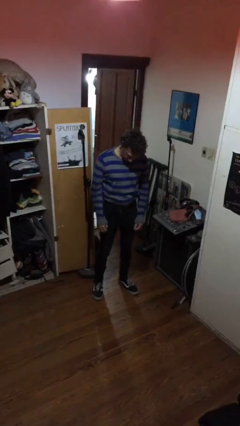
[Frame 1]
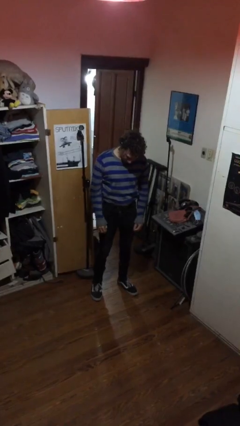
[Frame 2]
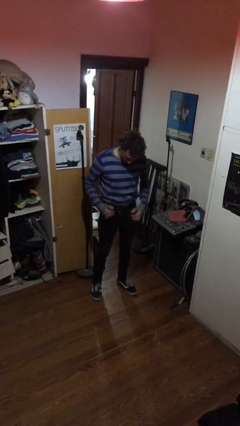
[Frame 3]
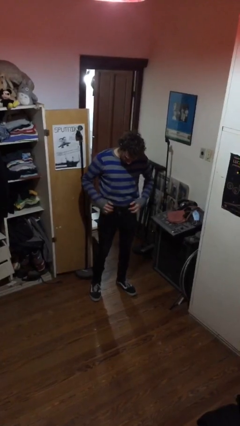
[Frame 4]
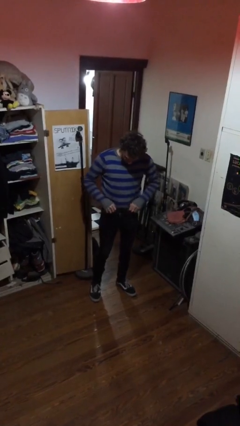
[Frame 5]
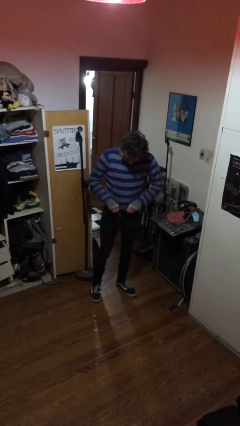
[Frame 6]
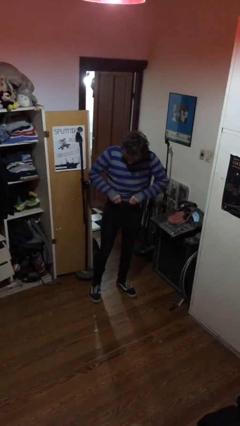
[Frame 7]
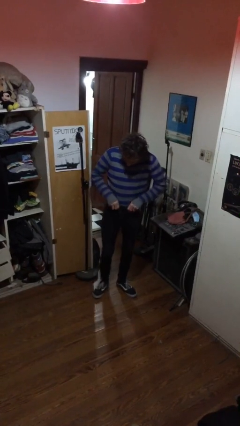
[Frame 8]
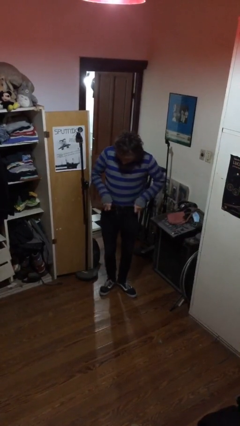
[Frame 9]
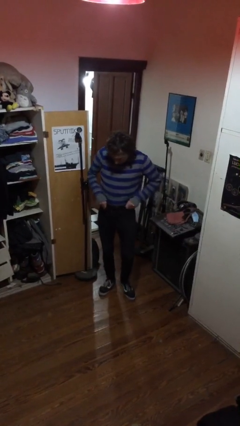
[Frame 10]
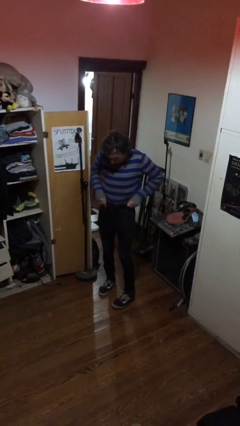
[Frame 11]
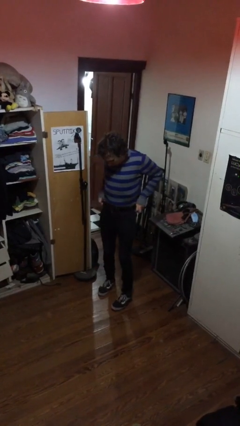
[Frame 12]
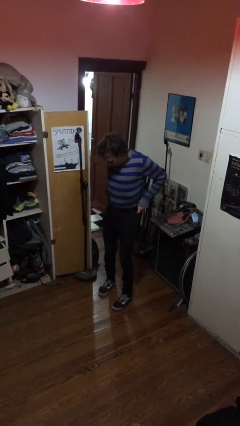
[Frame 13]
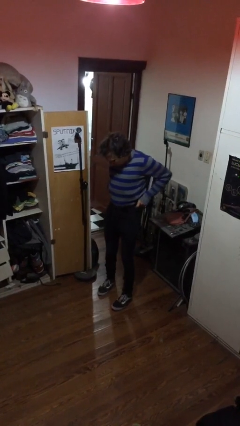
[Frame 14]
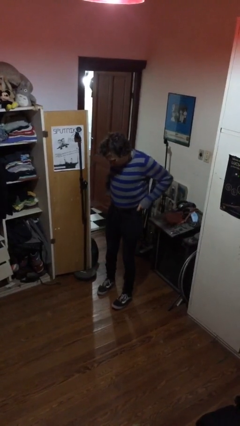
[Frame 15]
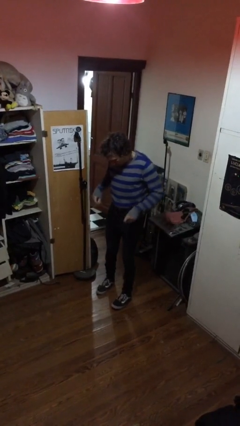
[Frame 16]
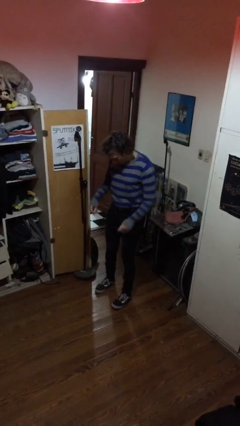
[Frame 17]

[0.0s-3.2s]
person hikes up pants

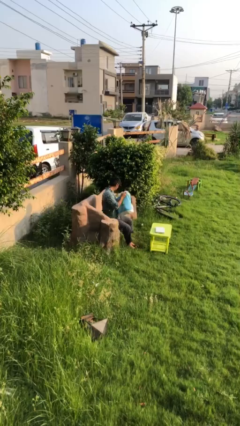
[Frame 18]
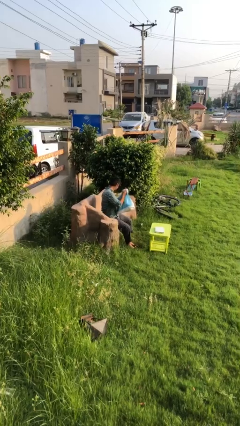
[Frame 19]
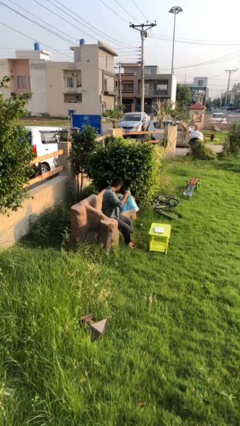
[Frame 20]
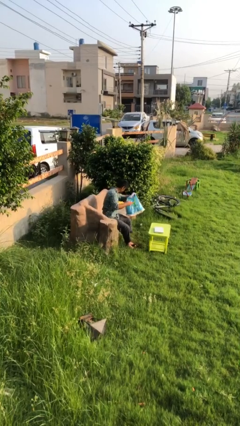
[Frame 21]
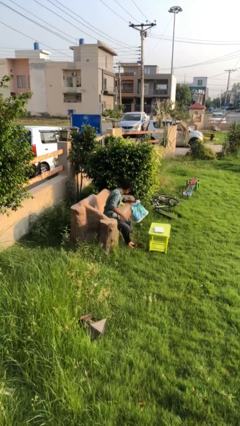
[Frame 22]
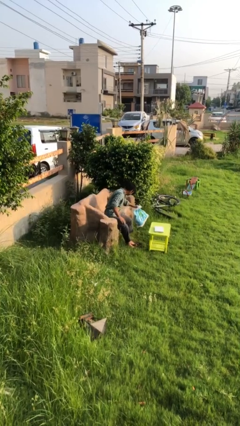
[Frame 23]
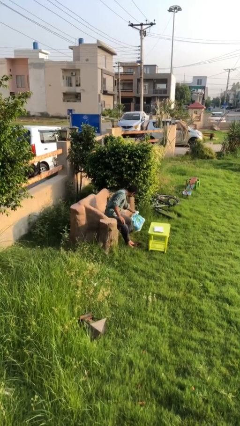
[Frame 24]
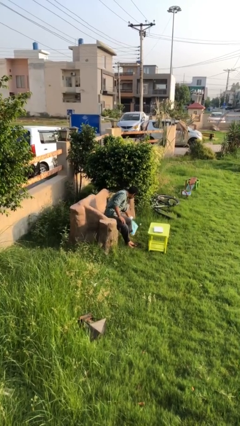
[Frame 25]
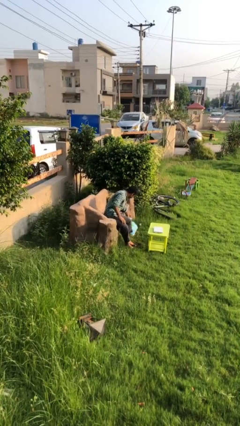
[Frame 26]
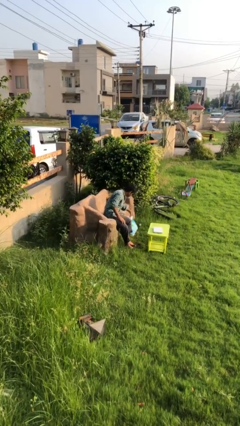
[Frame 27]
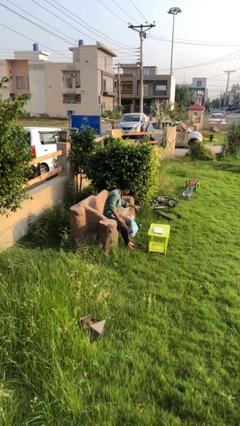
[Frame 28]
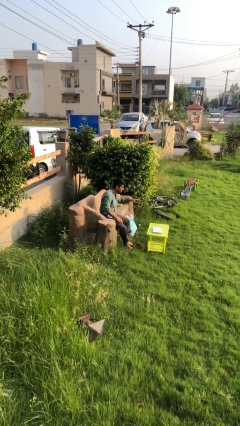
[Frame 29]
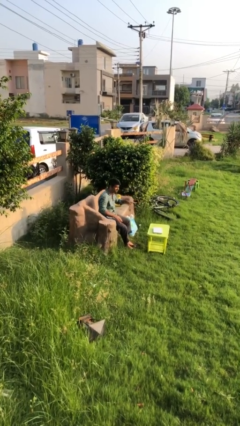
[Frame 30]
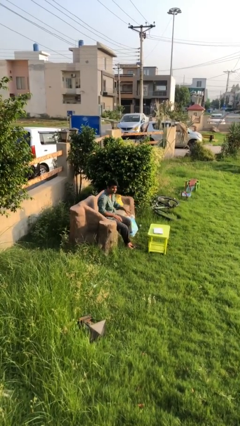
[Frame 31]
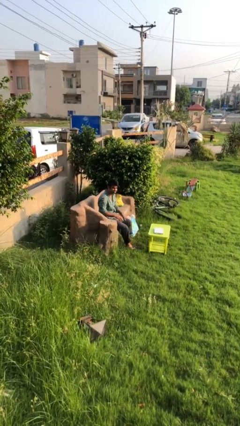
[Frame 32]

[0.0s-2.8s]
person puts down object on floor

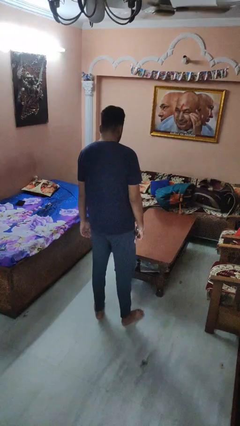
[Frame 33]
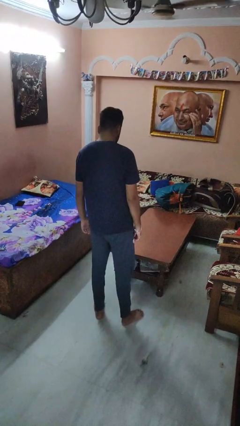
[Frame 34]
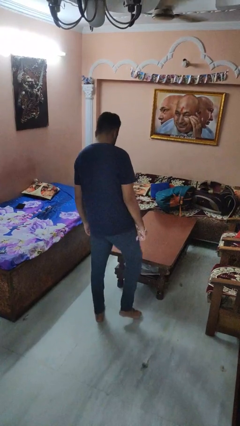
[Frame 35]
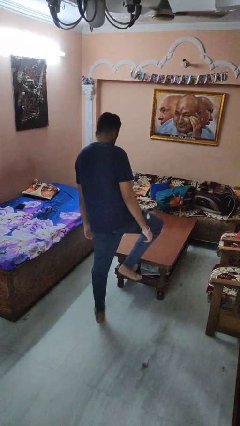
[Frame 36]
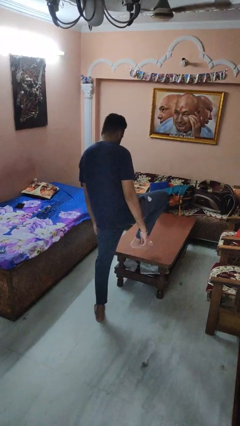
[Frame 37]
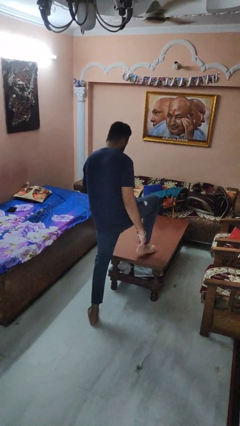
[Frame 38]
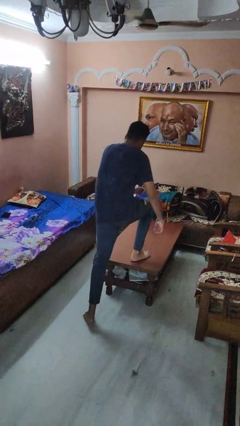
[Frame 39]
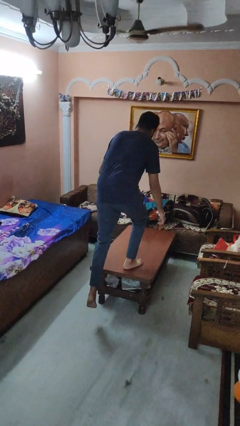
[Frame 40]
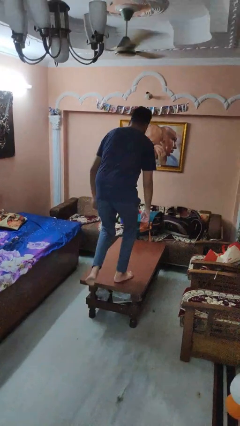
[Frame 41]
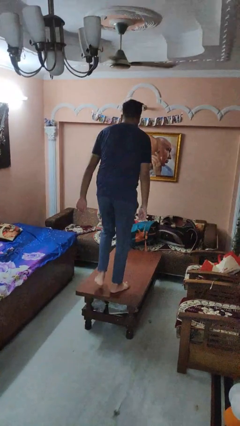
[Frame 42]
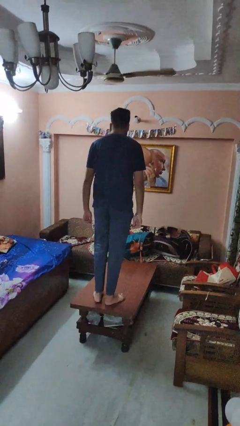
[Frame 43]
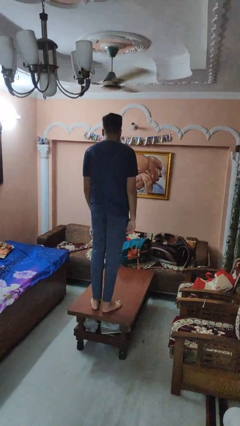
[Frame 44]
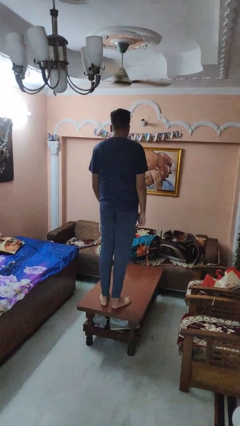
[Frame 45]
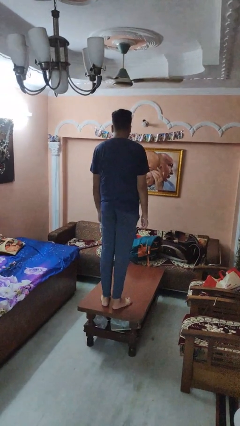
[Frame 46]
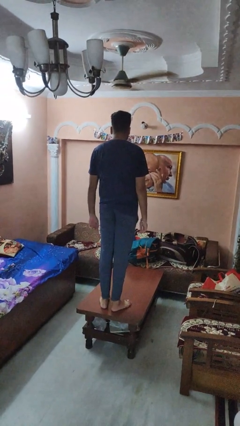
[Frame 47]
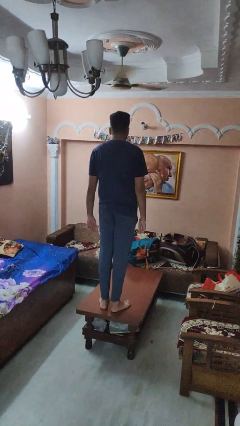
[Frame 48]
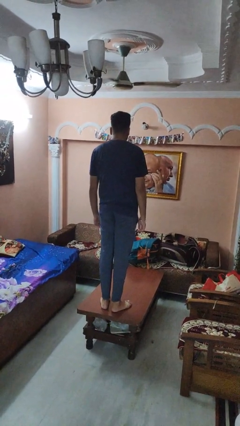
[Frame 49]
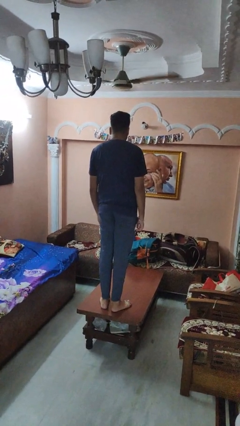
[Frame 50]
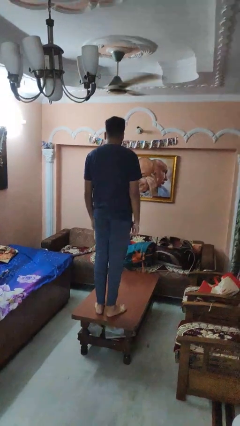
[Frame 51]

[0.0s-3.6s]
person climbs on table

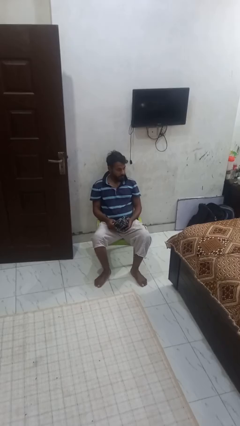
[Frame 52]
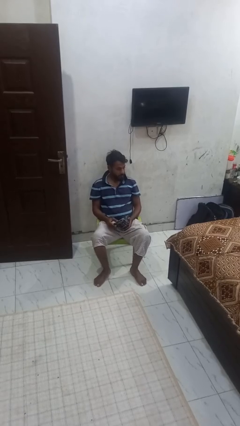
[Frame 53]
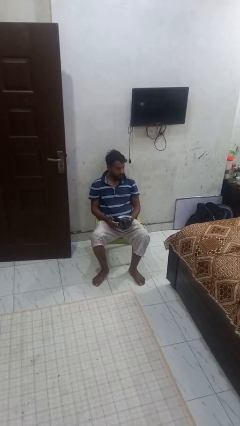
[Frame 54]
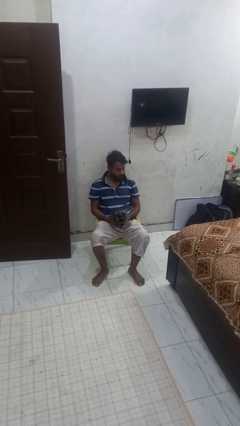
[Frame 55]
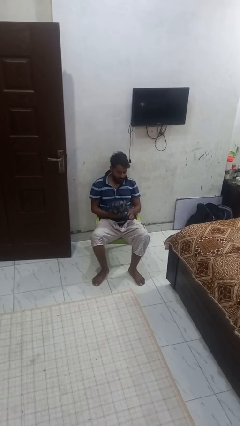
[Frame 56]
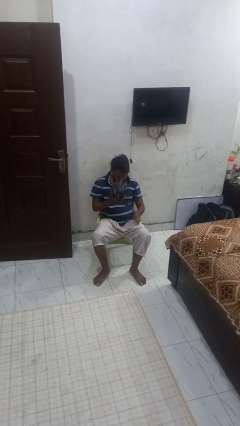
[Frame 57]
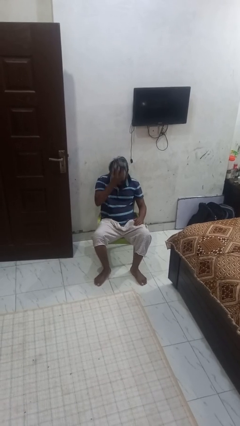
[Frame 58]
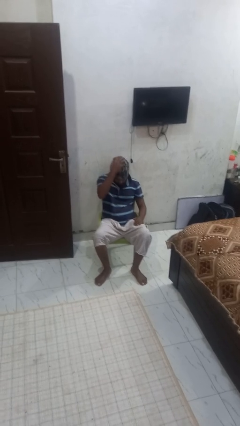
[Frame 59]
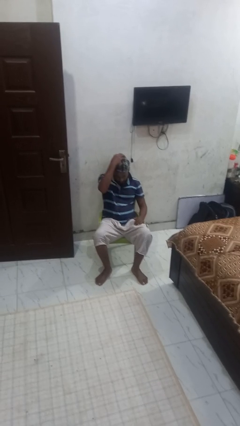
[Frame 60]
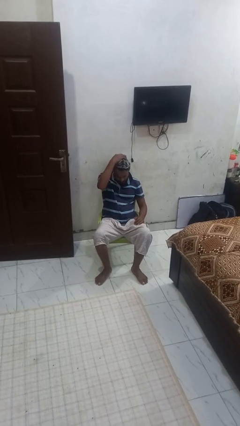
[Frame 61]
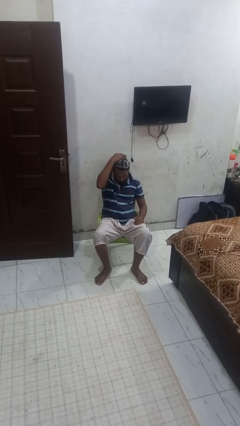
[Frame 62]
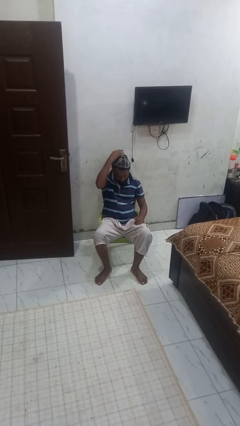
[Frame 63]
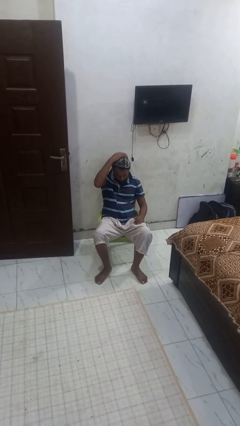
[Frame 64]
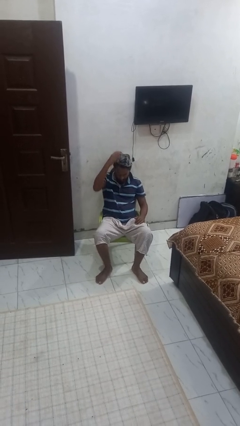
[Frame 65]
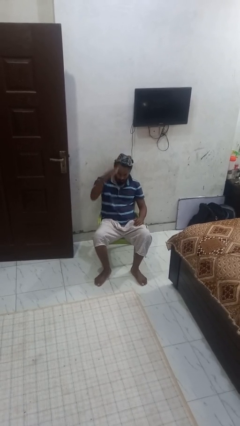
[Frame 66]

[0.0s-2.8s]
person puts on hat

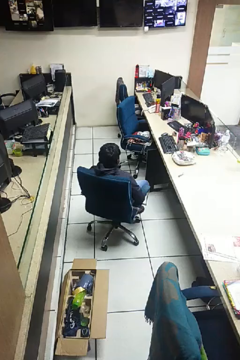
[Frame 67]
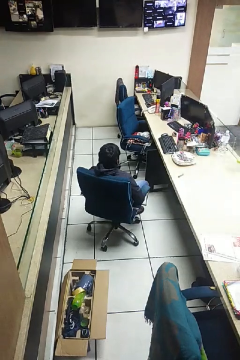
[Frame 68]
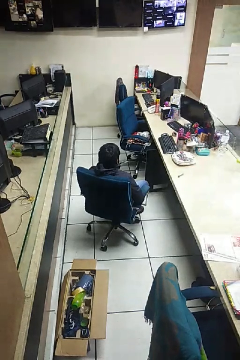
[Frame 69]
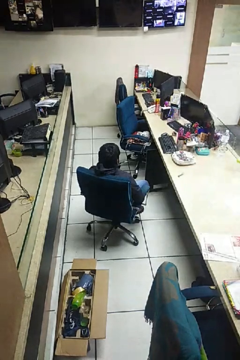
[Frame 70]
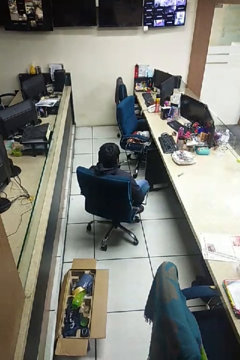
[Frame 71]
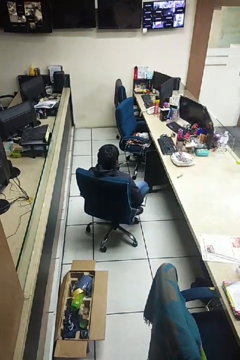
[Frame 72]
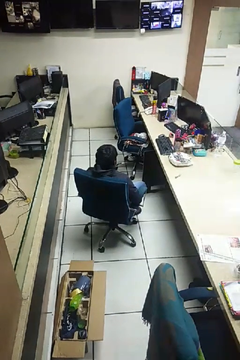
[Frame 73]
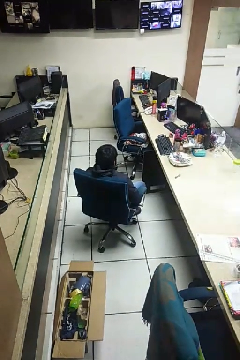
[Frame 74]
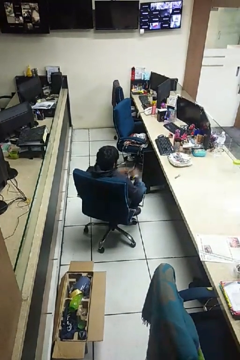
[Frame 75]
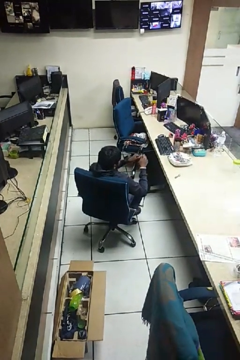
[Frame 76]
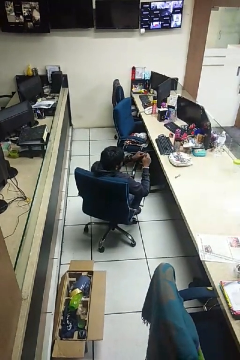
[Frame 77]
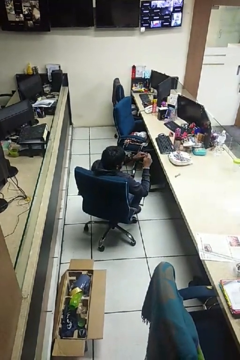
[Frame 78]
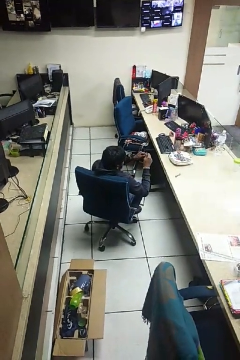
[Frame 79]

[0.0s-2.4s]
person files fingernails

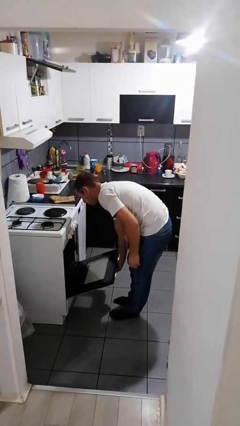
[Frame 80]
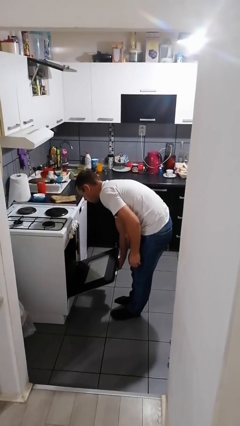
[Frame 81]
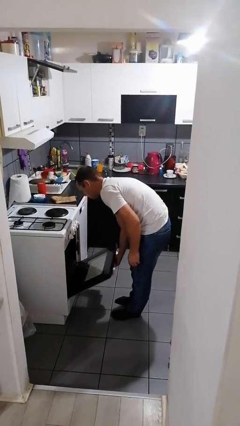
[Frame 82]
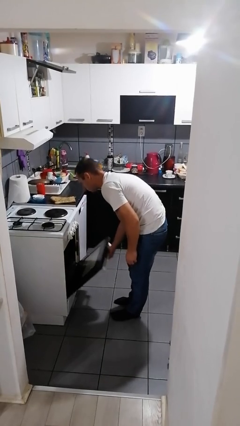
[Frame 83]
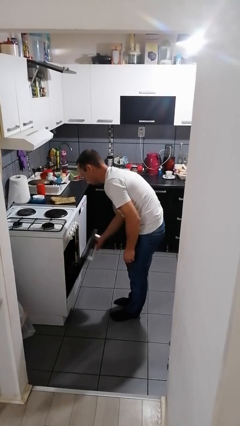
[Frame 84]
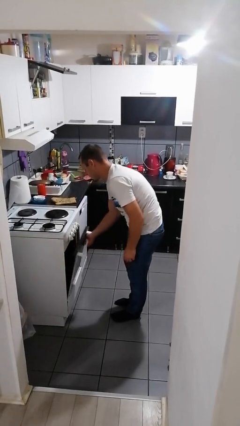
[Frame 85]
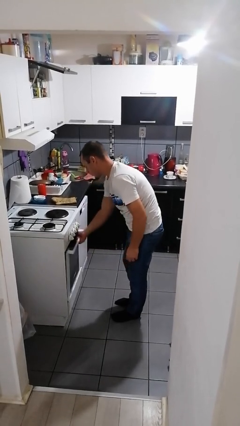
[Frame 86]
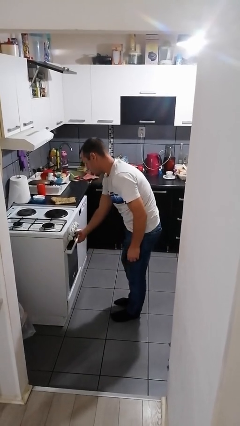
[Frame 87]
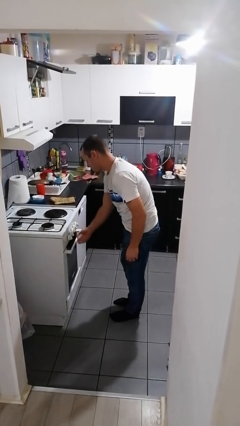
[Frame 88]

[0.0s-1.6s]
person closes oven door

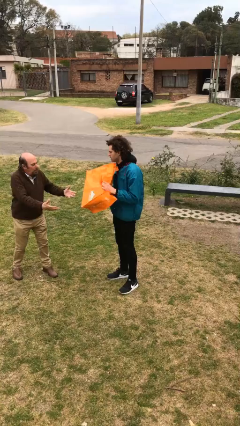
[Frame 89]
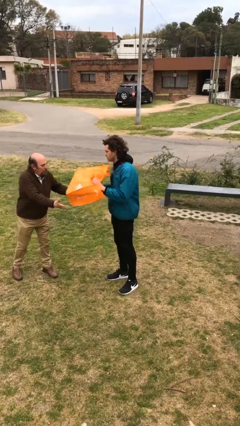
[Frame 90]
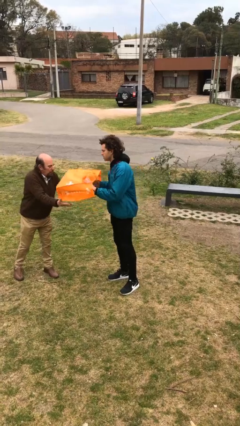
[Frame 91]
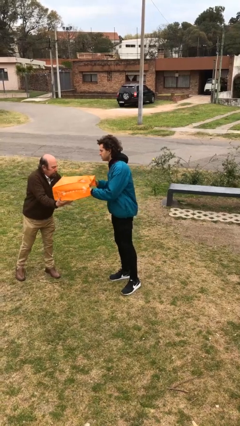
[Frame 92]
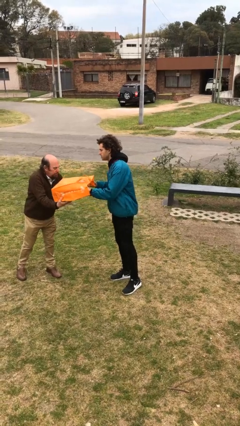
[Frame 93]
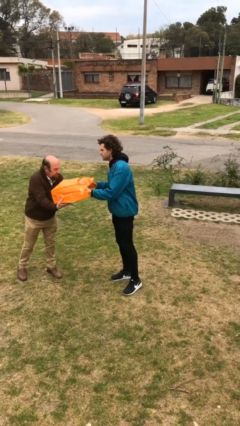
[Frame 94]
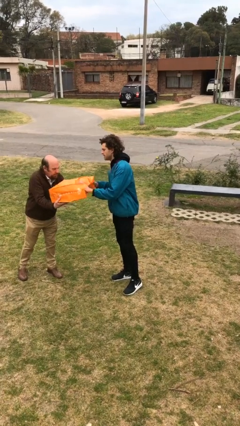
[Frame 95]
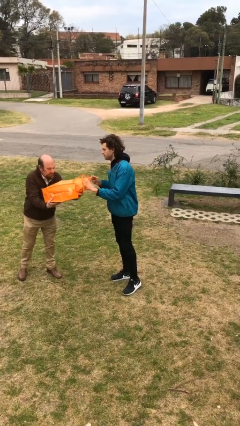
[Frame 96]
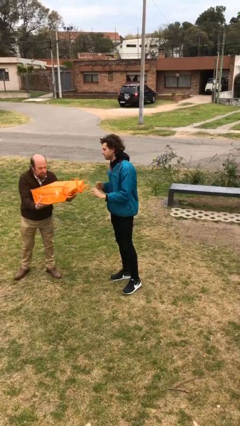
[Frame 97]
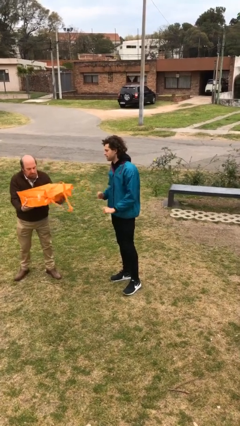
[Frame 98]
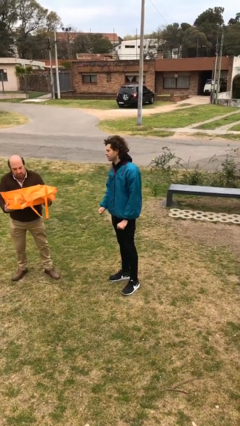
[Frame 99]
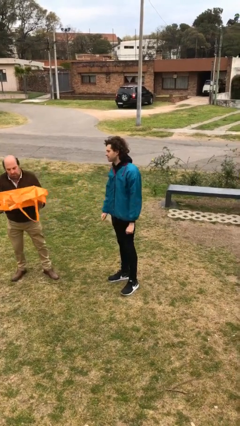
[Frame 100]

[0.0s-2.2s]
person transfers object to person
